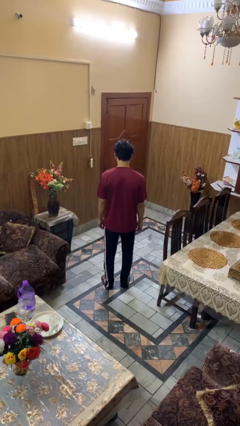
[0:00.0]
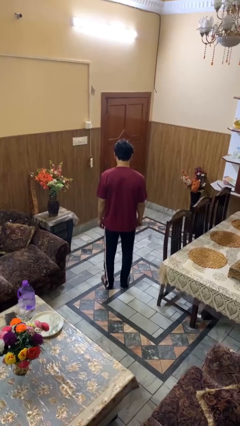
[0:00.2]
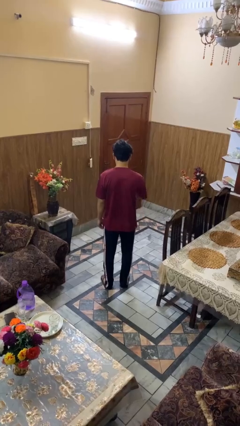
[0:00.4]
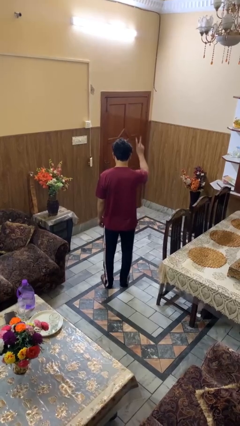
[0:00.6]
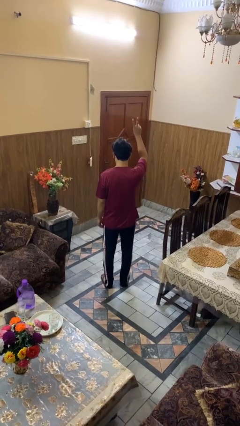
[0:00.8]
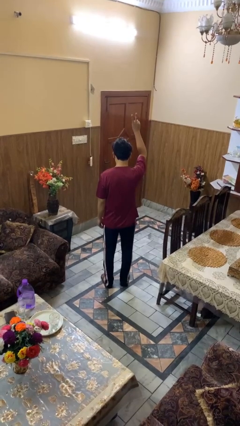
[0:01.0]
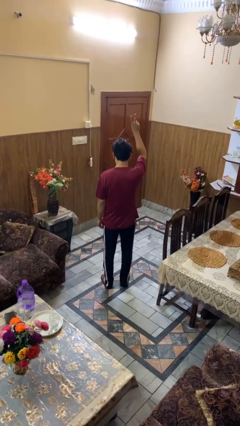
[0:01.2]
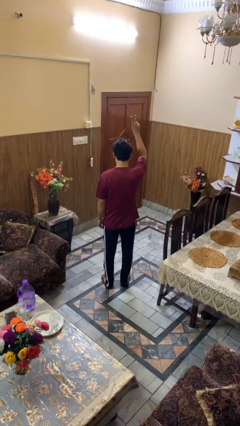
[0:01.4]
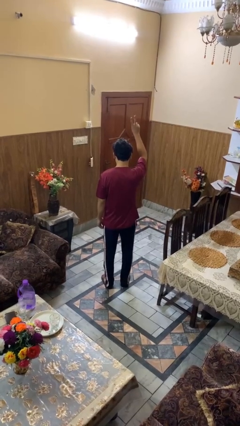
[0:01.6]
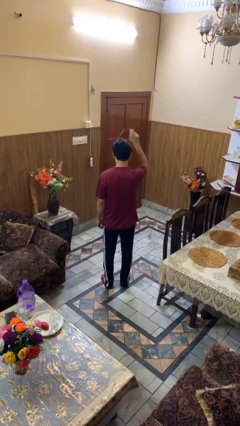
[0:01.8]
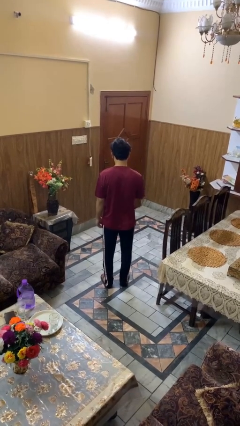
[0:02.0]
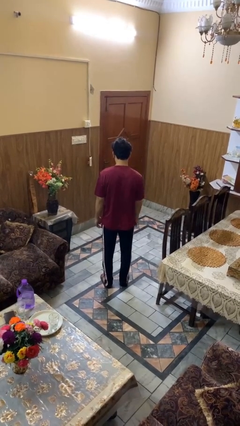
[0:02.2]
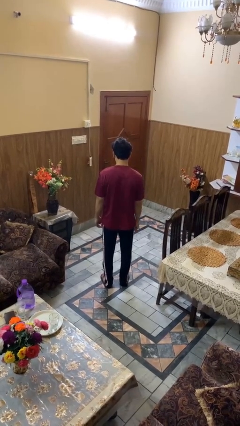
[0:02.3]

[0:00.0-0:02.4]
person gestures peace

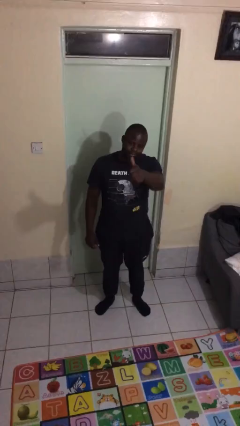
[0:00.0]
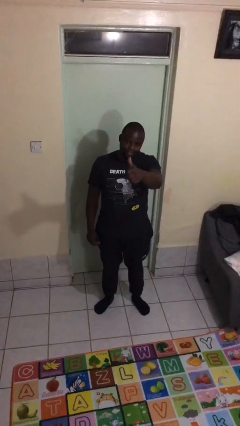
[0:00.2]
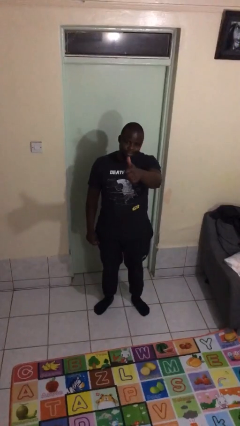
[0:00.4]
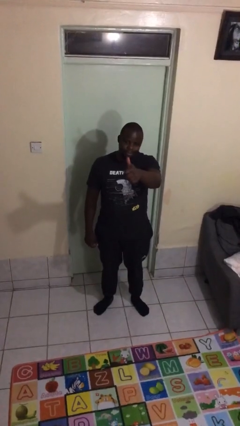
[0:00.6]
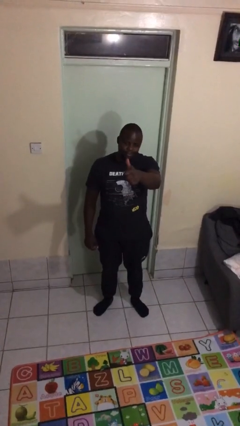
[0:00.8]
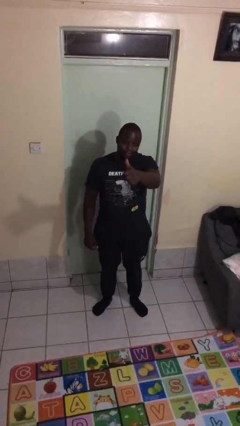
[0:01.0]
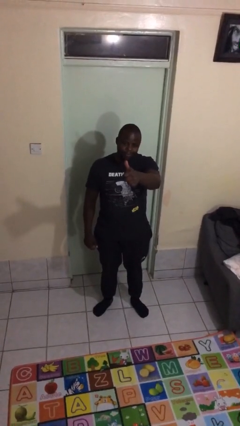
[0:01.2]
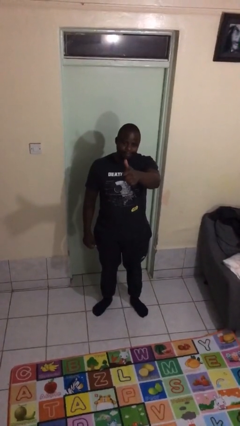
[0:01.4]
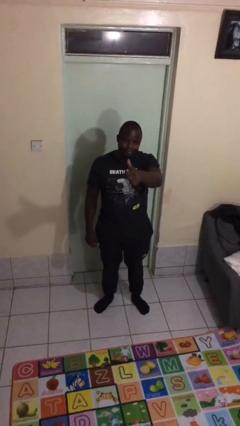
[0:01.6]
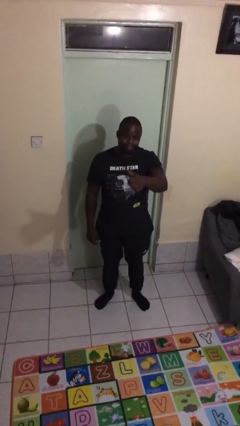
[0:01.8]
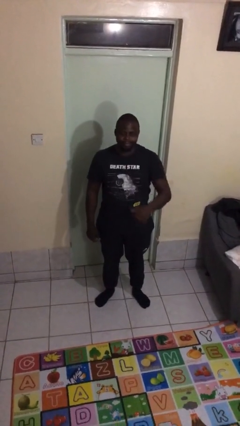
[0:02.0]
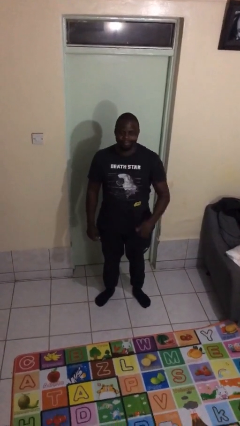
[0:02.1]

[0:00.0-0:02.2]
person gestures thumbs up

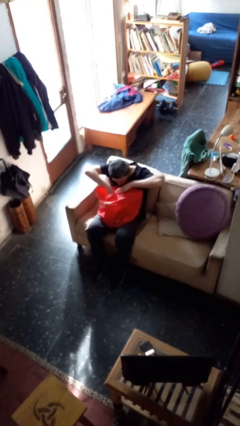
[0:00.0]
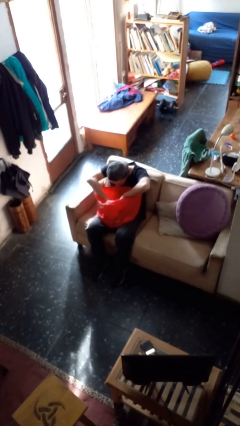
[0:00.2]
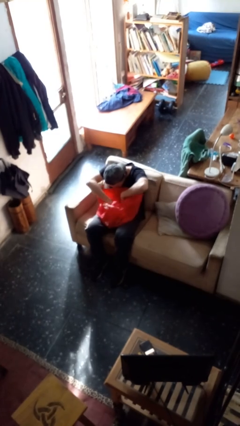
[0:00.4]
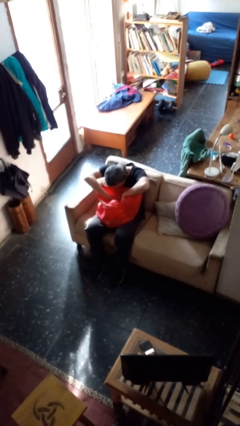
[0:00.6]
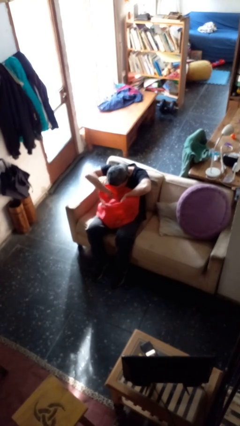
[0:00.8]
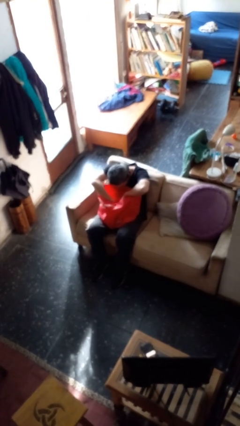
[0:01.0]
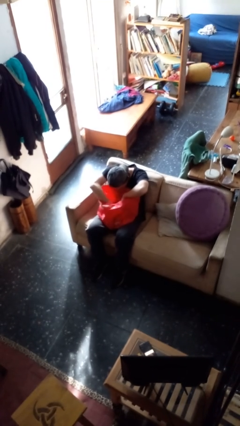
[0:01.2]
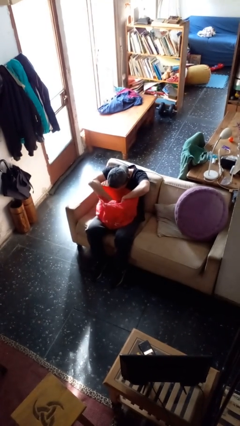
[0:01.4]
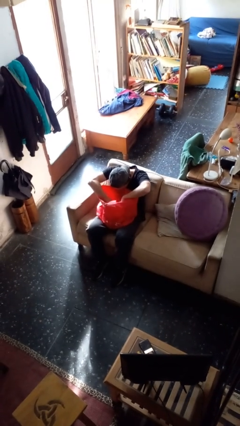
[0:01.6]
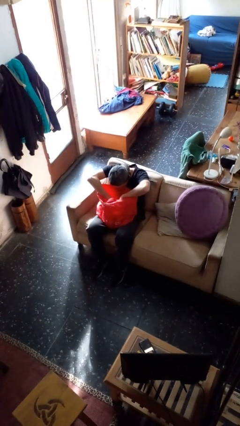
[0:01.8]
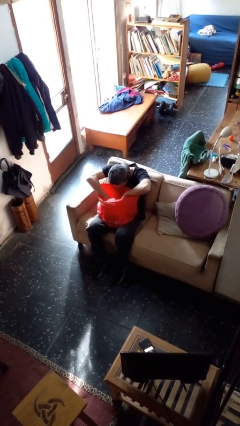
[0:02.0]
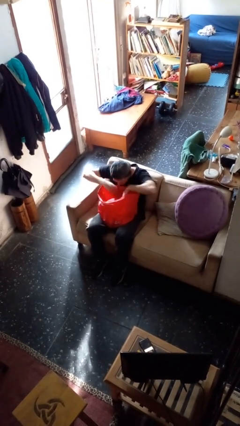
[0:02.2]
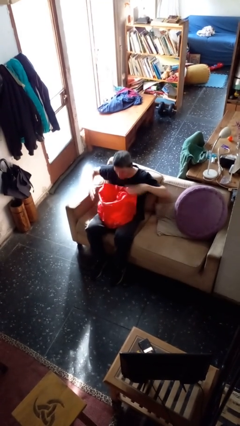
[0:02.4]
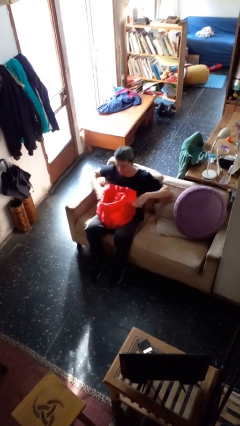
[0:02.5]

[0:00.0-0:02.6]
person searches in bag

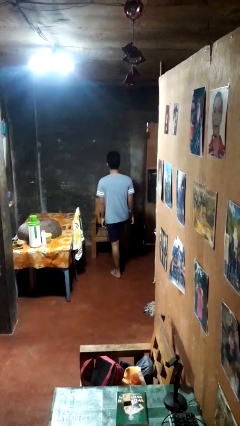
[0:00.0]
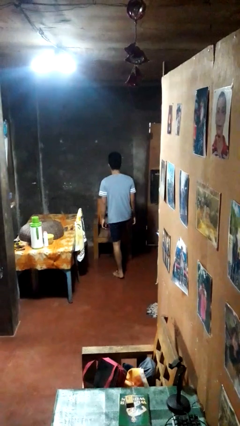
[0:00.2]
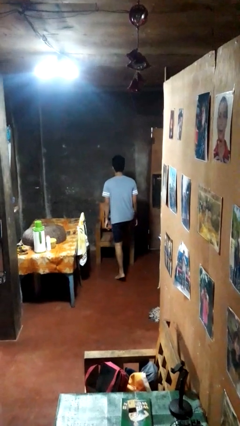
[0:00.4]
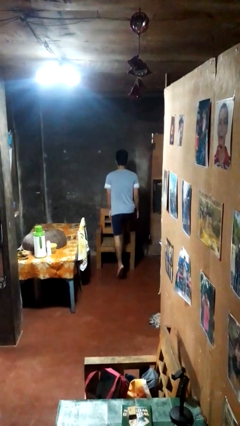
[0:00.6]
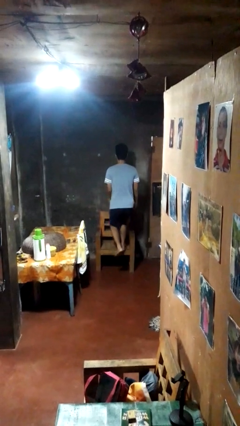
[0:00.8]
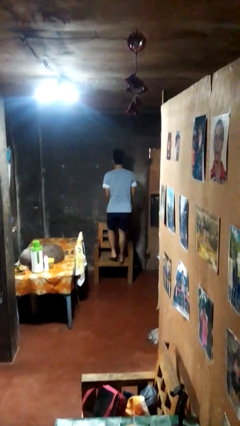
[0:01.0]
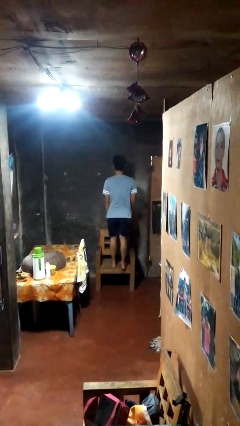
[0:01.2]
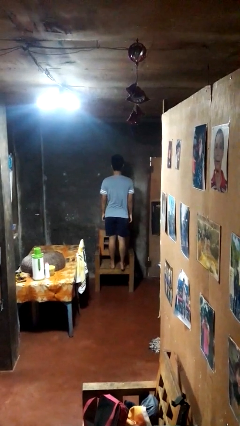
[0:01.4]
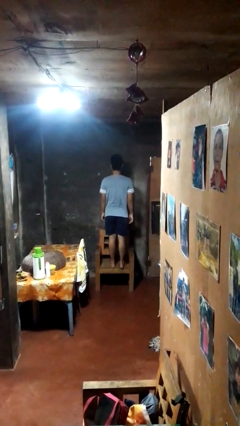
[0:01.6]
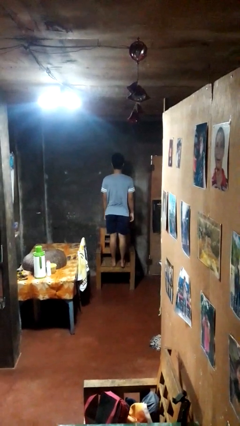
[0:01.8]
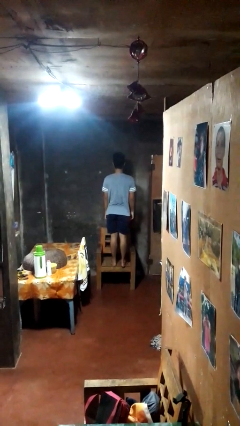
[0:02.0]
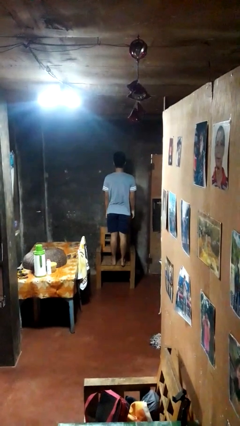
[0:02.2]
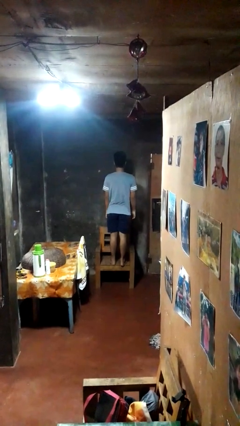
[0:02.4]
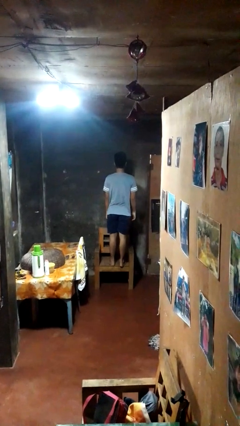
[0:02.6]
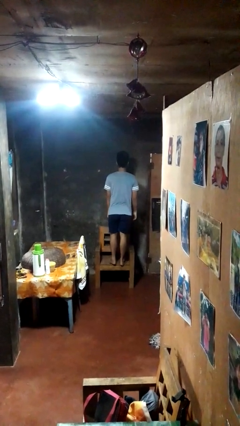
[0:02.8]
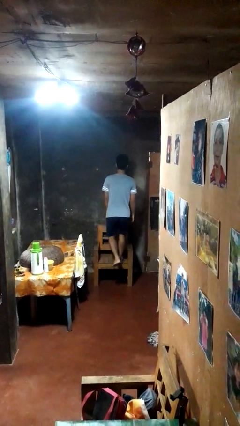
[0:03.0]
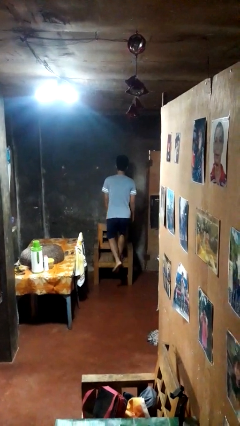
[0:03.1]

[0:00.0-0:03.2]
person climbs on chair

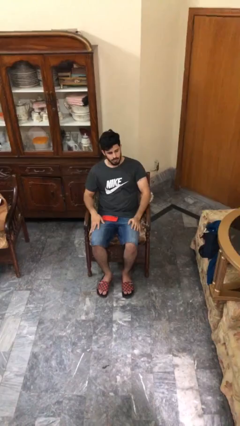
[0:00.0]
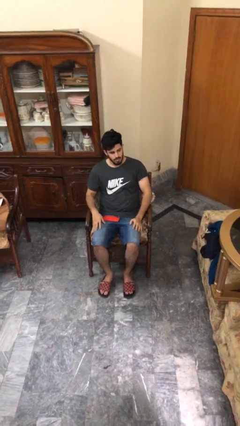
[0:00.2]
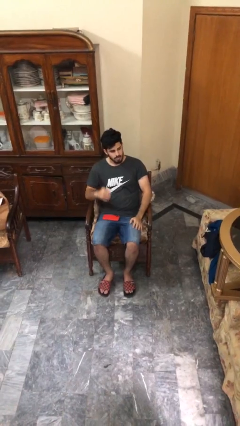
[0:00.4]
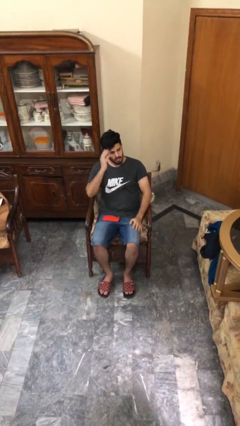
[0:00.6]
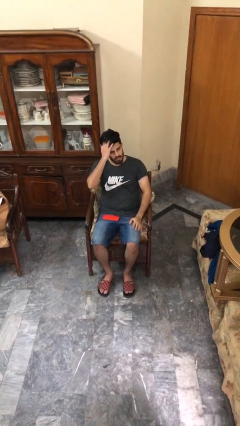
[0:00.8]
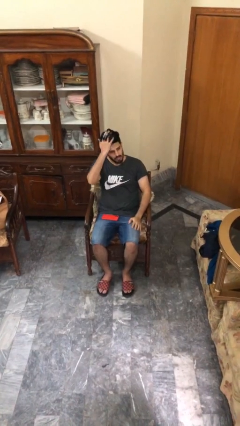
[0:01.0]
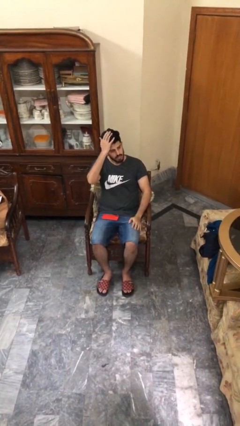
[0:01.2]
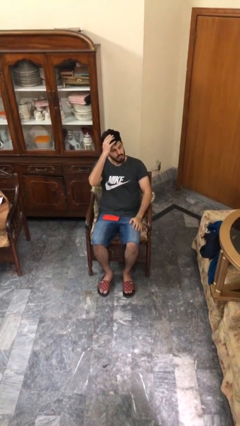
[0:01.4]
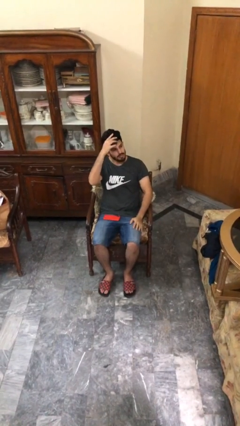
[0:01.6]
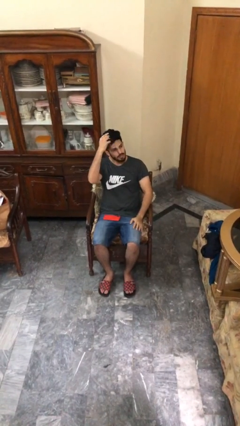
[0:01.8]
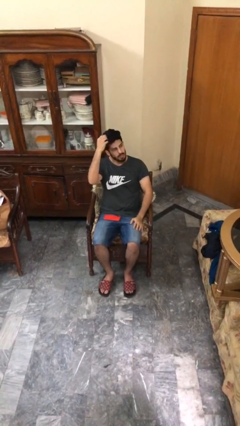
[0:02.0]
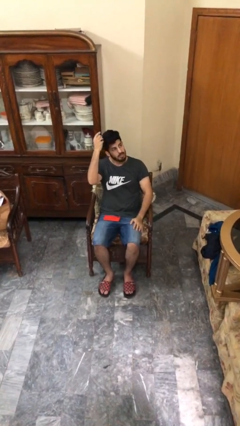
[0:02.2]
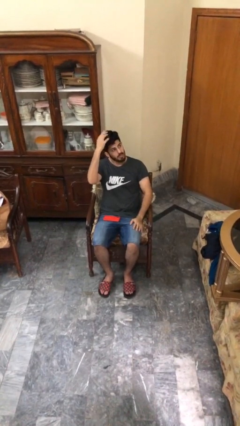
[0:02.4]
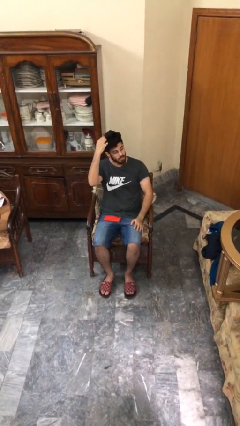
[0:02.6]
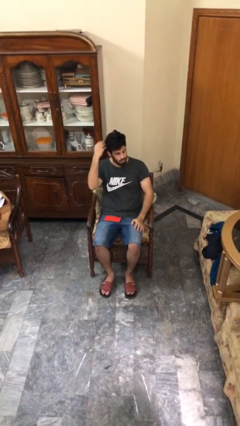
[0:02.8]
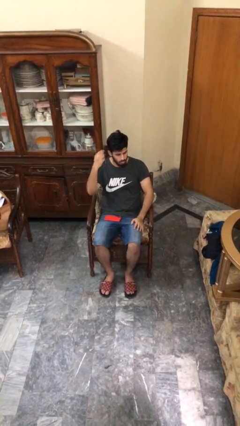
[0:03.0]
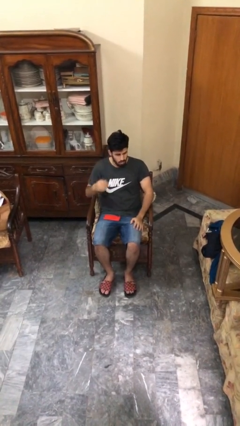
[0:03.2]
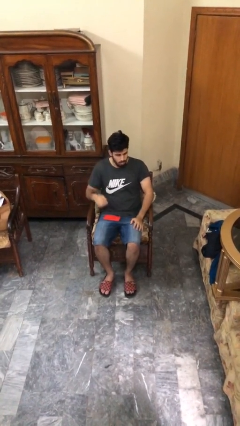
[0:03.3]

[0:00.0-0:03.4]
person strokes hair

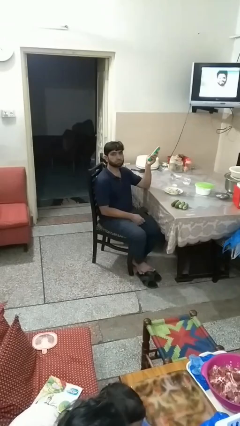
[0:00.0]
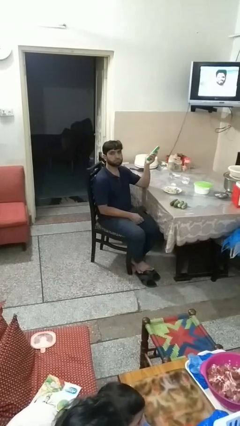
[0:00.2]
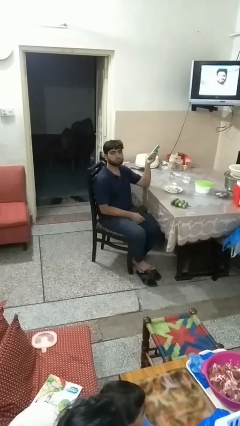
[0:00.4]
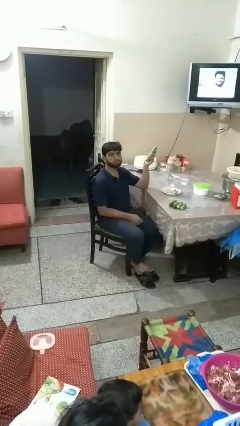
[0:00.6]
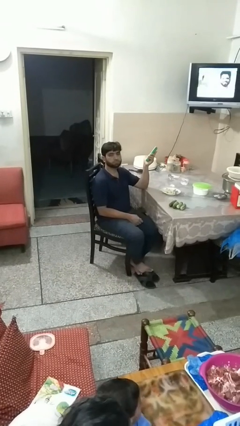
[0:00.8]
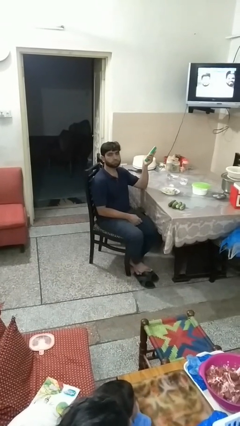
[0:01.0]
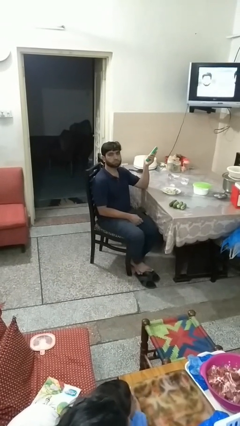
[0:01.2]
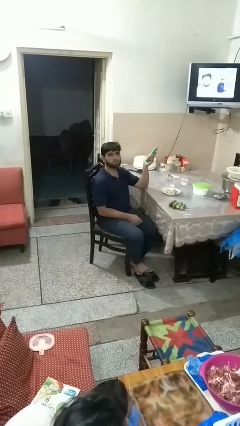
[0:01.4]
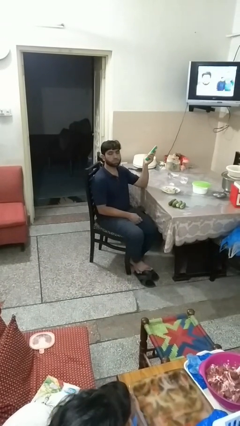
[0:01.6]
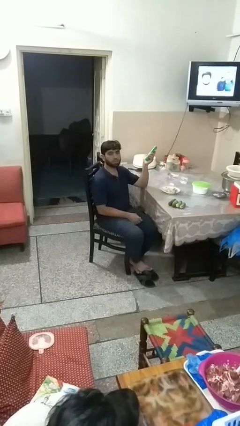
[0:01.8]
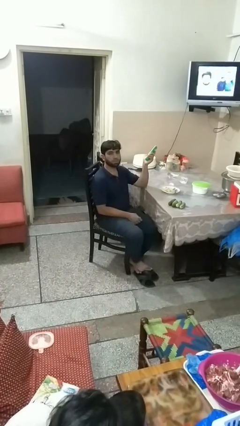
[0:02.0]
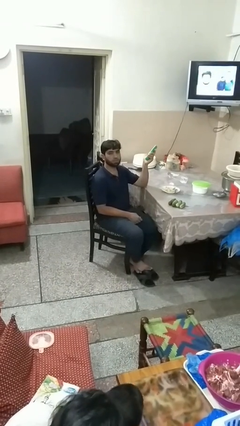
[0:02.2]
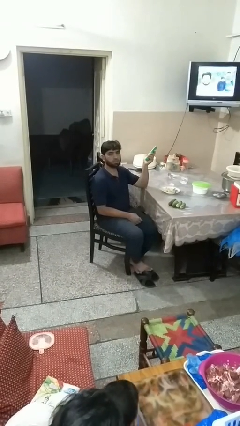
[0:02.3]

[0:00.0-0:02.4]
person uses television remote

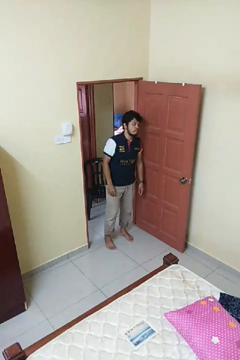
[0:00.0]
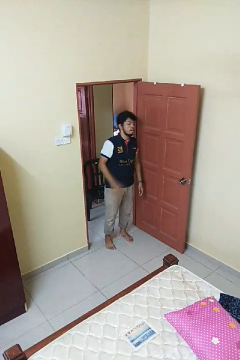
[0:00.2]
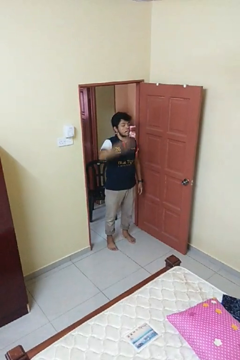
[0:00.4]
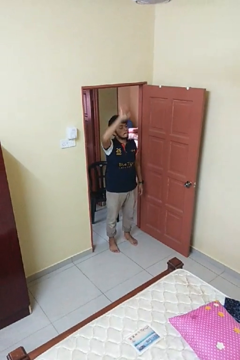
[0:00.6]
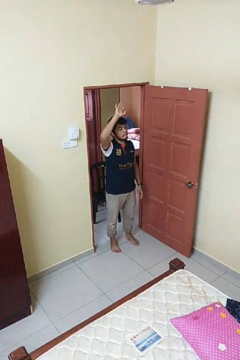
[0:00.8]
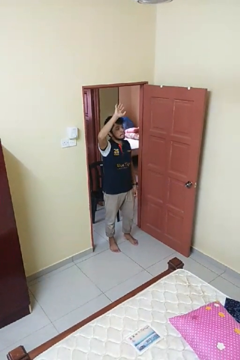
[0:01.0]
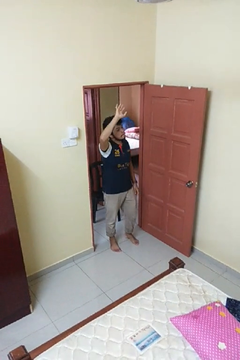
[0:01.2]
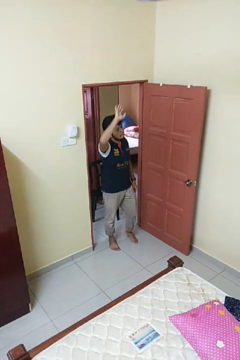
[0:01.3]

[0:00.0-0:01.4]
person gestures raise hand
